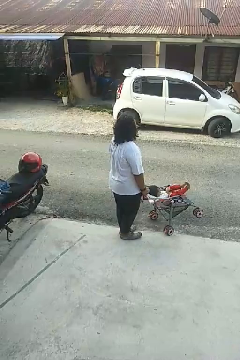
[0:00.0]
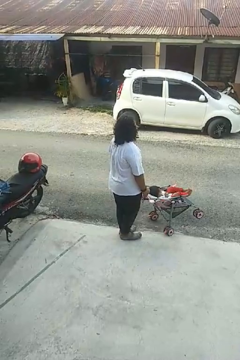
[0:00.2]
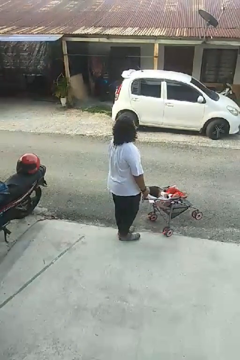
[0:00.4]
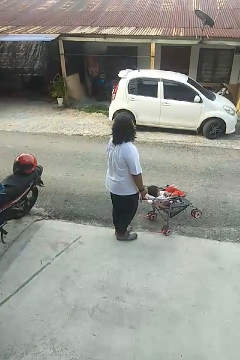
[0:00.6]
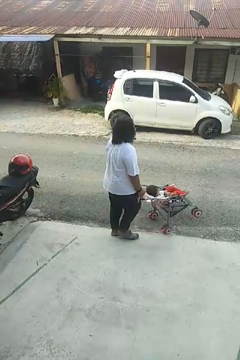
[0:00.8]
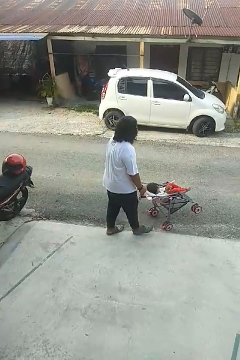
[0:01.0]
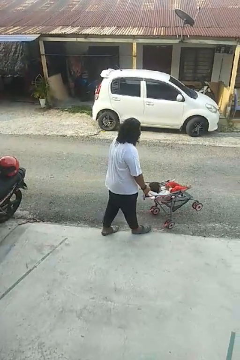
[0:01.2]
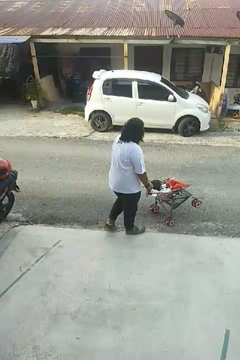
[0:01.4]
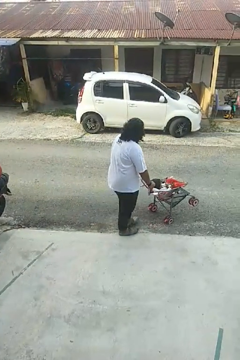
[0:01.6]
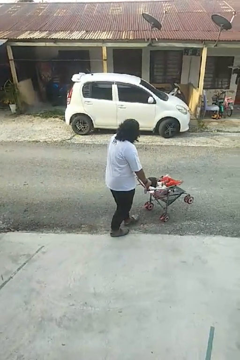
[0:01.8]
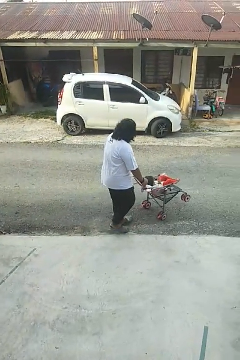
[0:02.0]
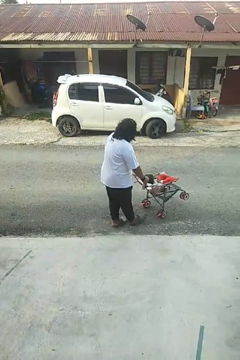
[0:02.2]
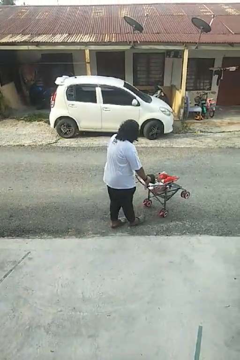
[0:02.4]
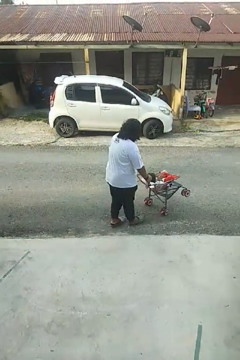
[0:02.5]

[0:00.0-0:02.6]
person pushes wheeled cart

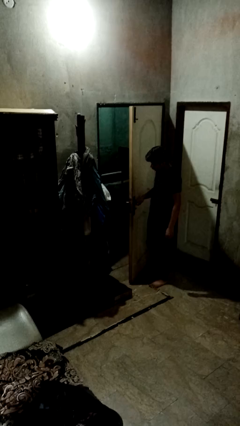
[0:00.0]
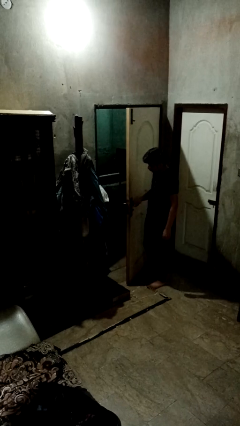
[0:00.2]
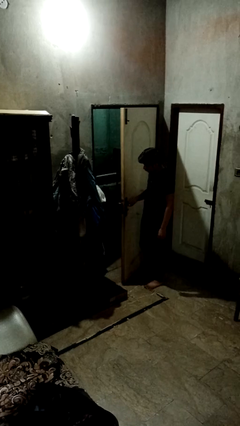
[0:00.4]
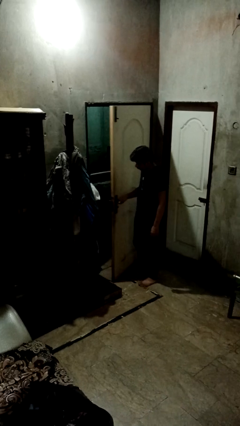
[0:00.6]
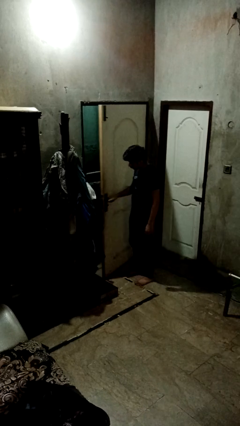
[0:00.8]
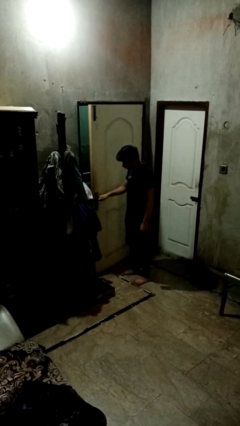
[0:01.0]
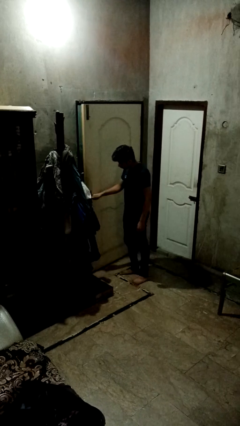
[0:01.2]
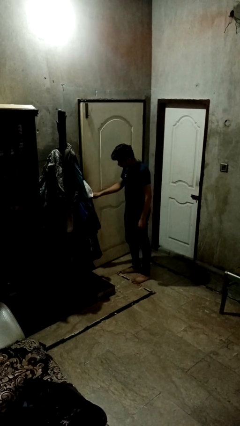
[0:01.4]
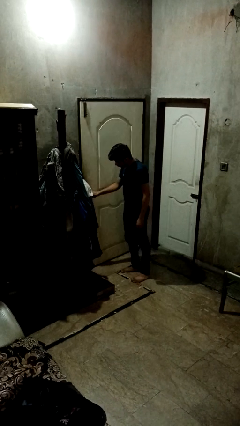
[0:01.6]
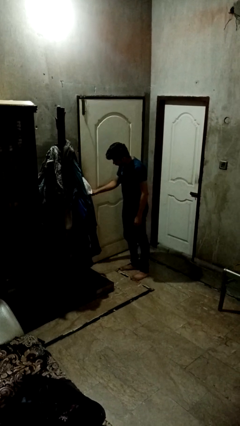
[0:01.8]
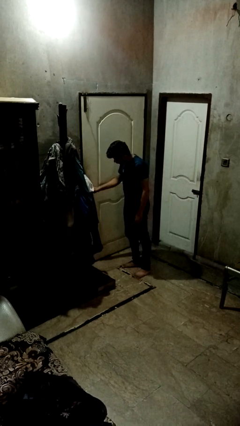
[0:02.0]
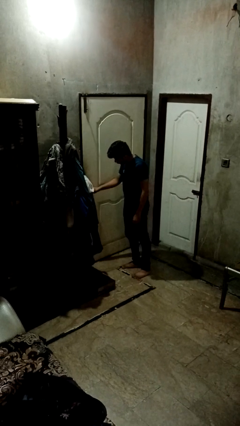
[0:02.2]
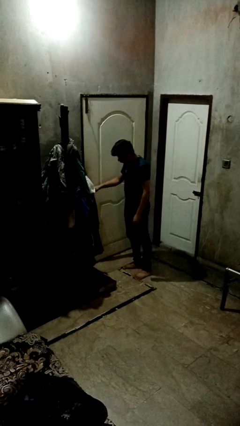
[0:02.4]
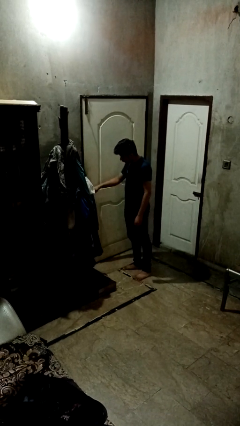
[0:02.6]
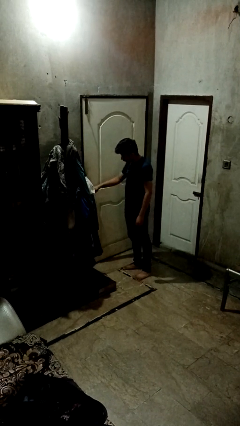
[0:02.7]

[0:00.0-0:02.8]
person closes facility door

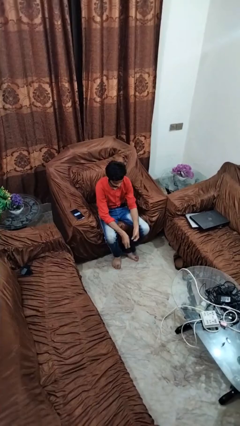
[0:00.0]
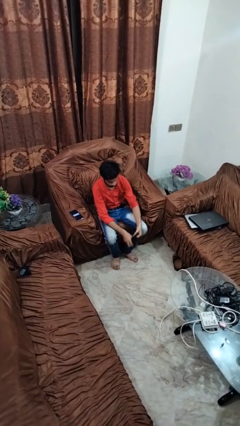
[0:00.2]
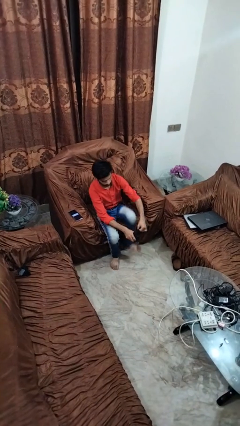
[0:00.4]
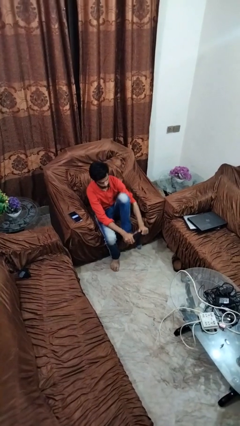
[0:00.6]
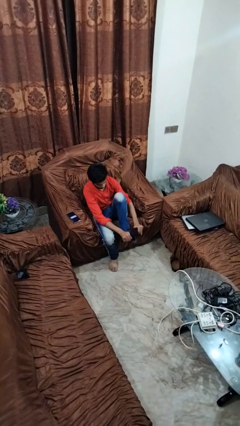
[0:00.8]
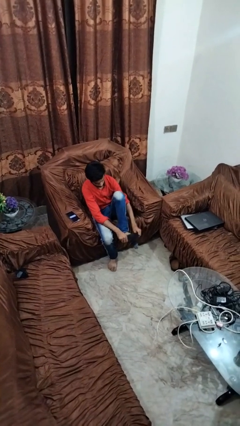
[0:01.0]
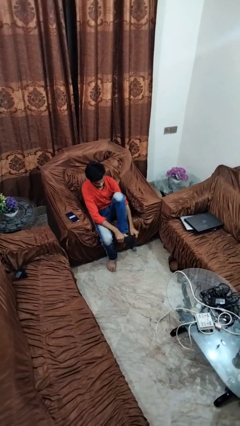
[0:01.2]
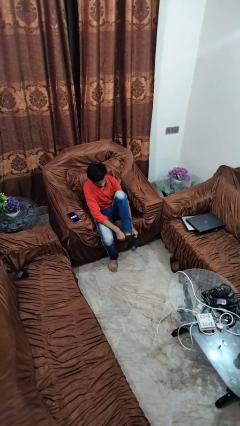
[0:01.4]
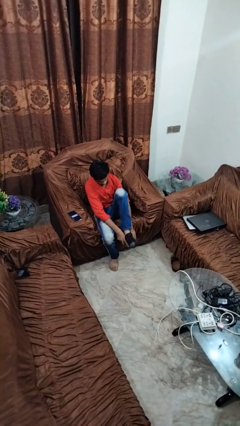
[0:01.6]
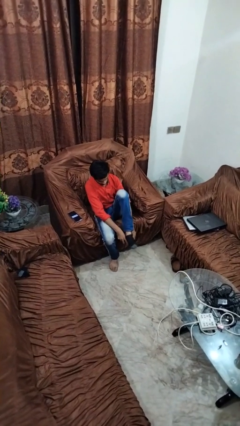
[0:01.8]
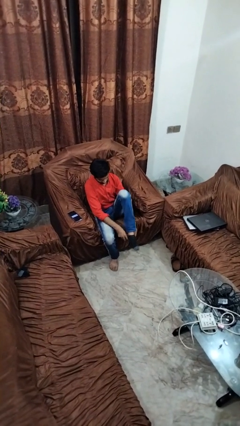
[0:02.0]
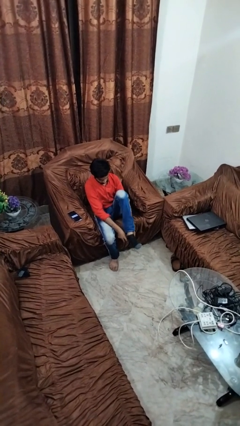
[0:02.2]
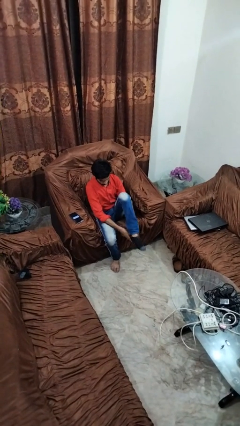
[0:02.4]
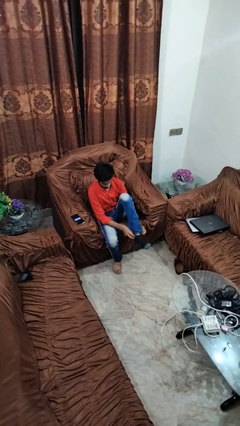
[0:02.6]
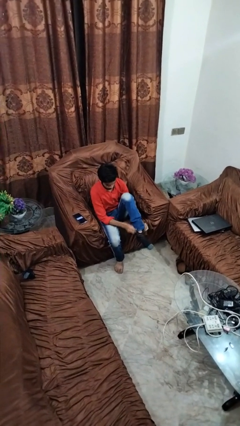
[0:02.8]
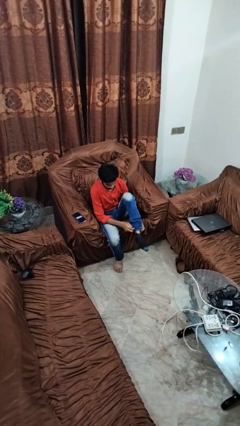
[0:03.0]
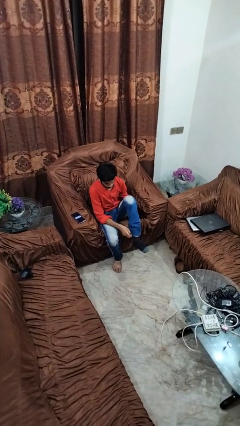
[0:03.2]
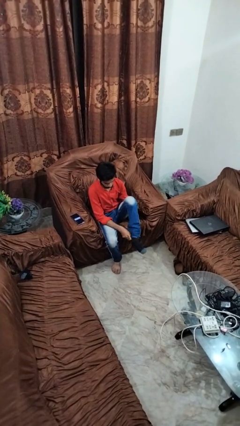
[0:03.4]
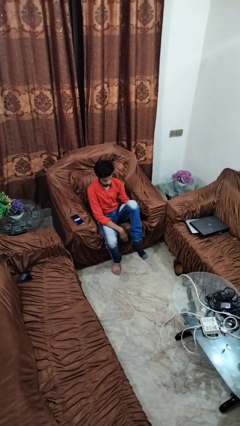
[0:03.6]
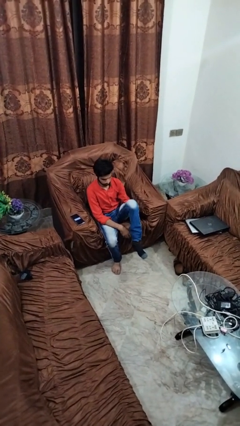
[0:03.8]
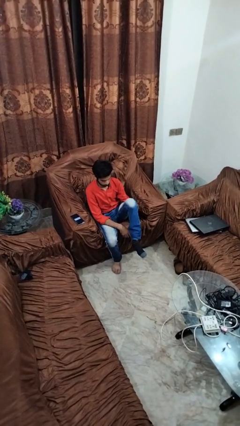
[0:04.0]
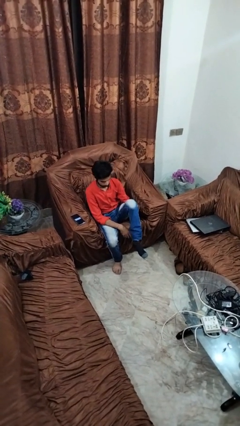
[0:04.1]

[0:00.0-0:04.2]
person puts on socks

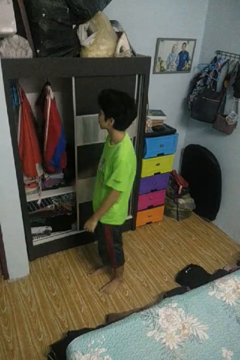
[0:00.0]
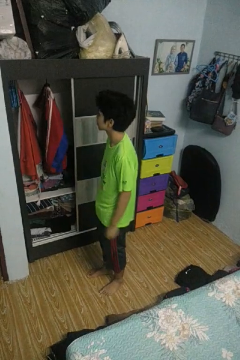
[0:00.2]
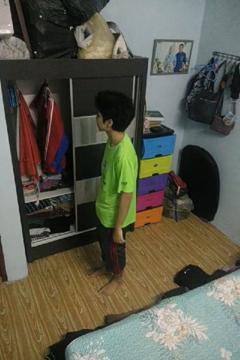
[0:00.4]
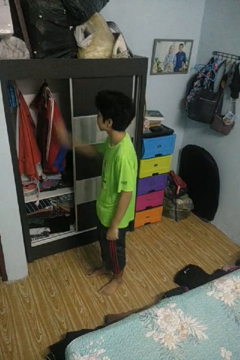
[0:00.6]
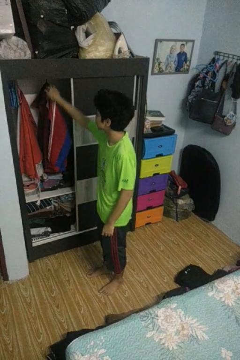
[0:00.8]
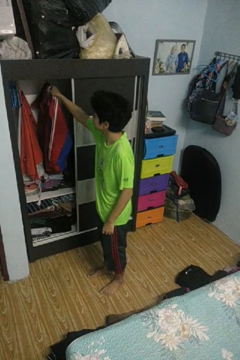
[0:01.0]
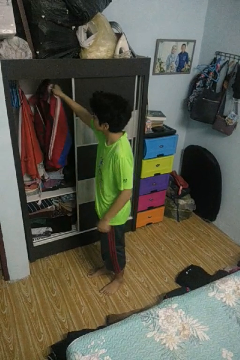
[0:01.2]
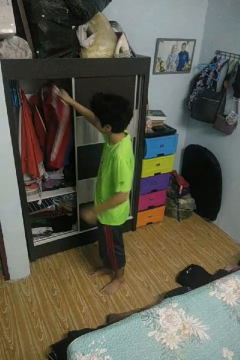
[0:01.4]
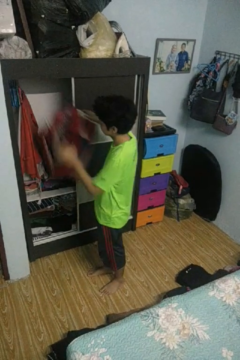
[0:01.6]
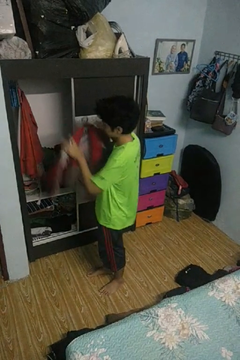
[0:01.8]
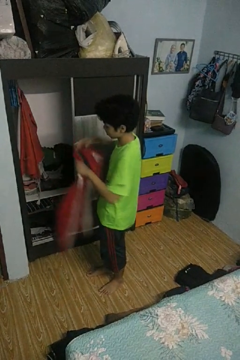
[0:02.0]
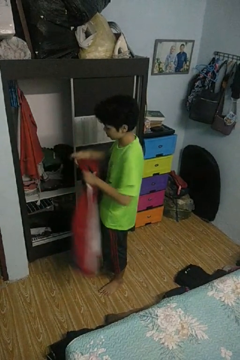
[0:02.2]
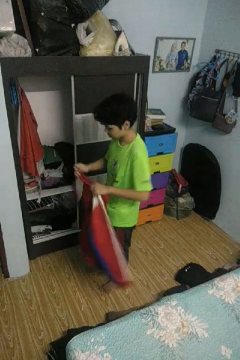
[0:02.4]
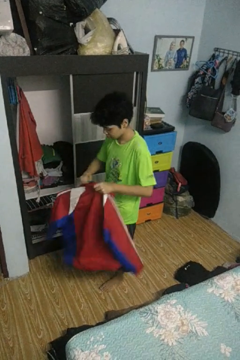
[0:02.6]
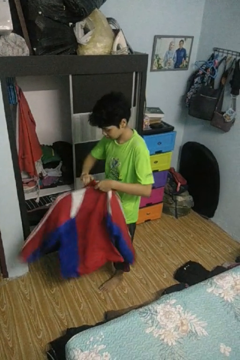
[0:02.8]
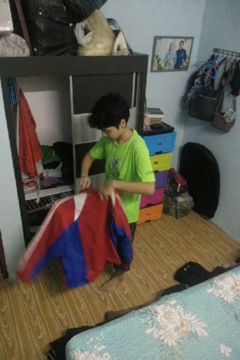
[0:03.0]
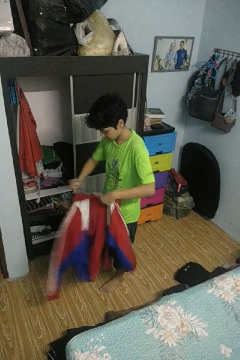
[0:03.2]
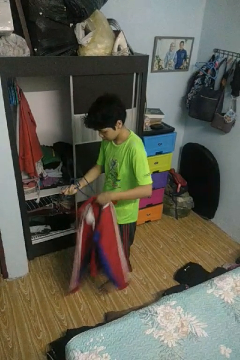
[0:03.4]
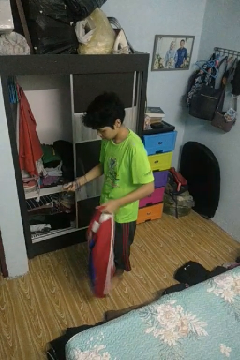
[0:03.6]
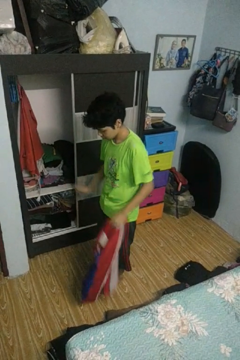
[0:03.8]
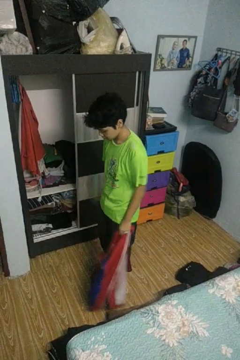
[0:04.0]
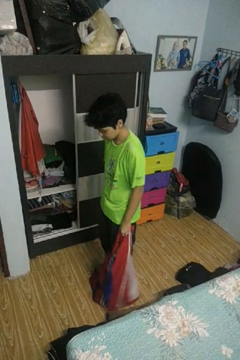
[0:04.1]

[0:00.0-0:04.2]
person takes clothes from closet

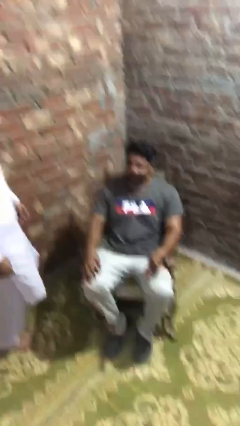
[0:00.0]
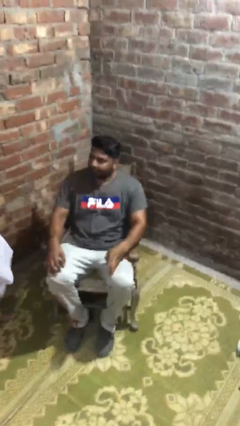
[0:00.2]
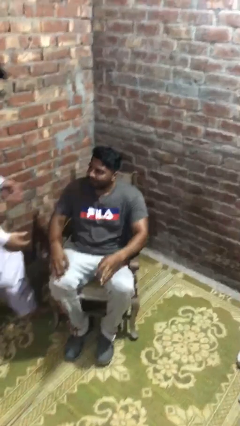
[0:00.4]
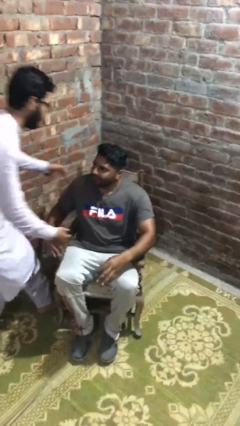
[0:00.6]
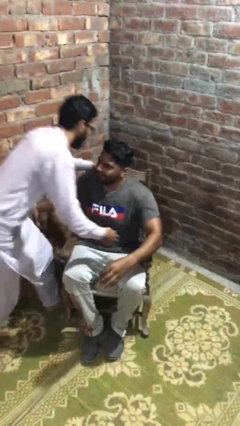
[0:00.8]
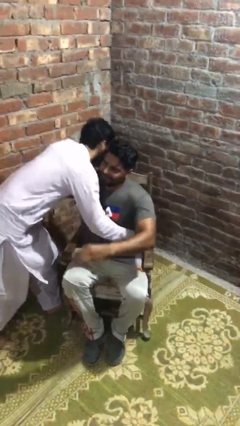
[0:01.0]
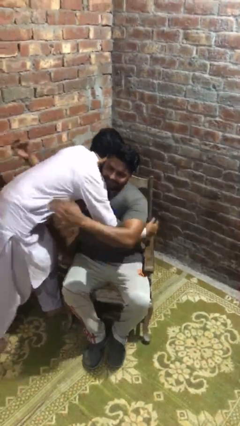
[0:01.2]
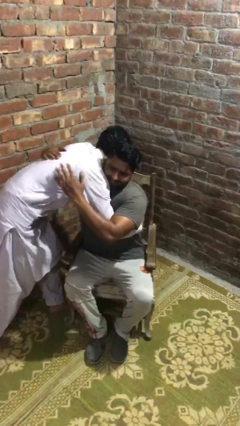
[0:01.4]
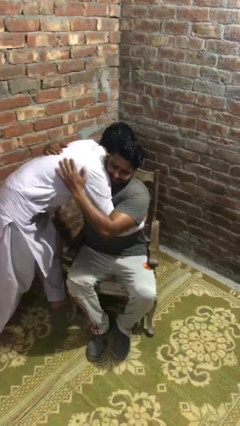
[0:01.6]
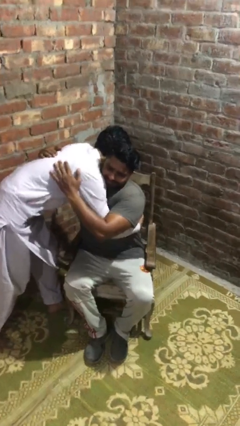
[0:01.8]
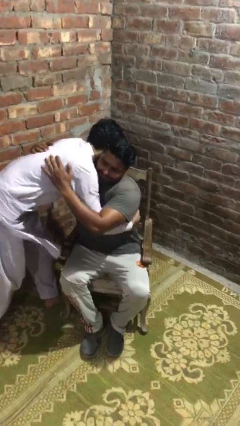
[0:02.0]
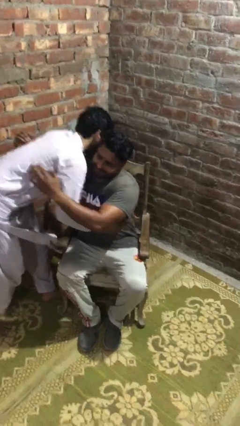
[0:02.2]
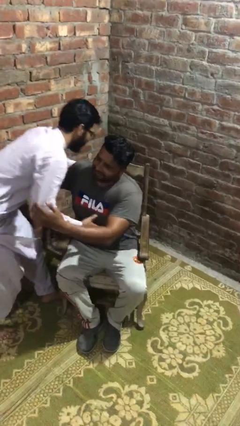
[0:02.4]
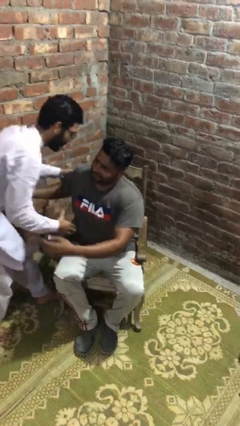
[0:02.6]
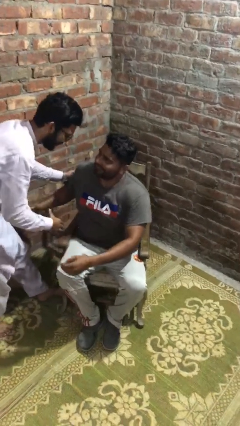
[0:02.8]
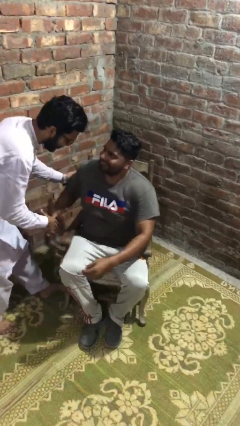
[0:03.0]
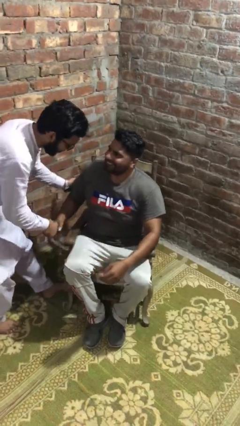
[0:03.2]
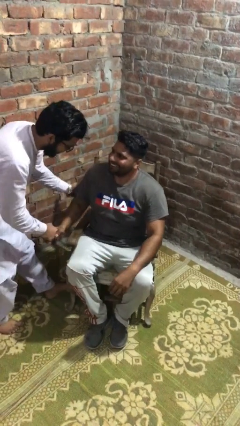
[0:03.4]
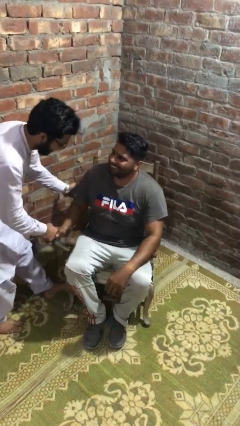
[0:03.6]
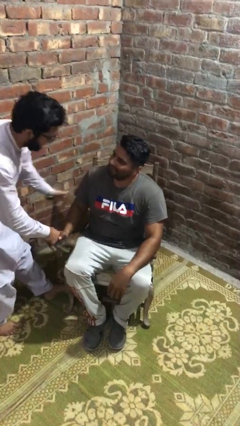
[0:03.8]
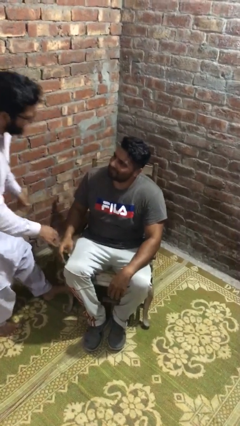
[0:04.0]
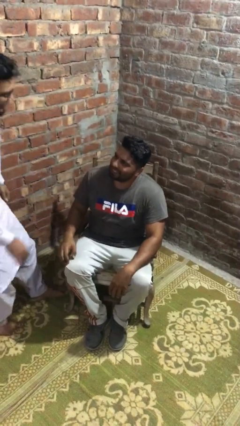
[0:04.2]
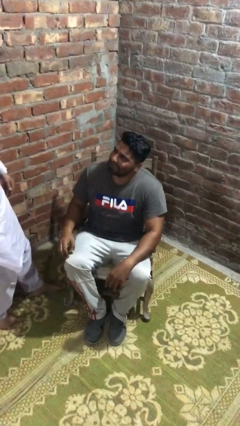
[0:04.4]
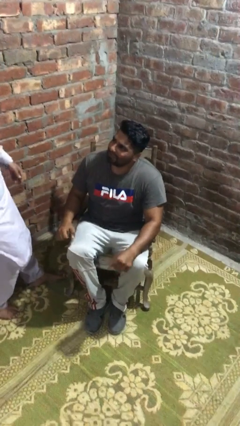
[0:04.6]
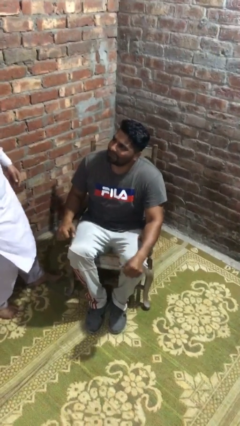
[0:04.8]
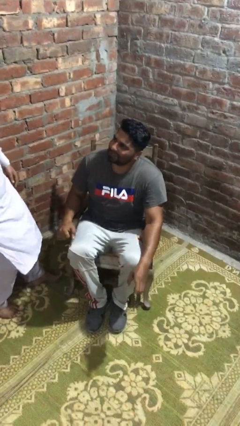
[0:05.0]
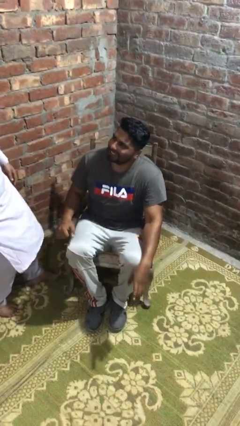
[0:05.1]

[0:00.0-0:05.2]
person embraces person
